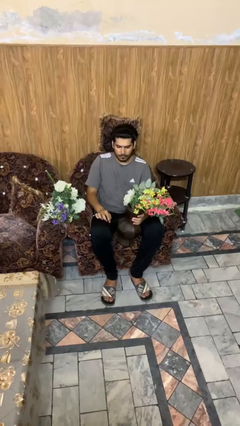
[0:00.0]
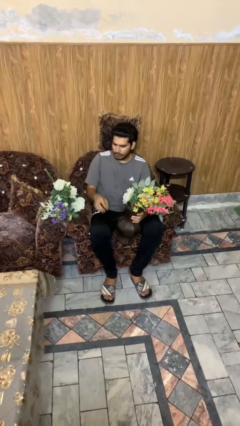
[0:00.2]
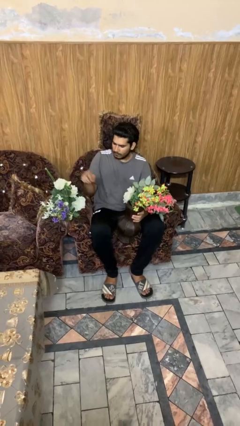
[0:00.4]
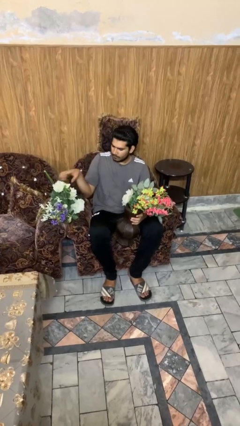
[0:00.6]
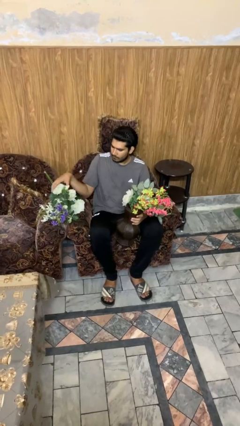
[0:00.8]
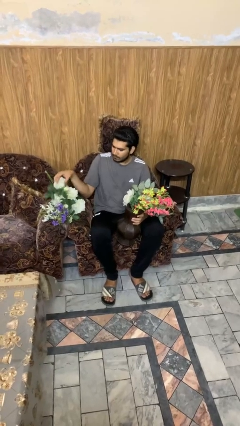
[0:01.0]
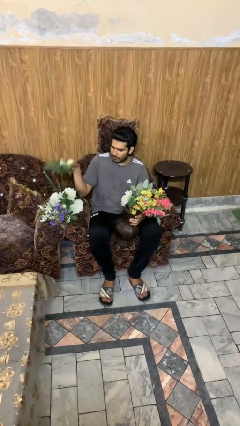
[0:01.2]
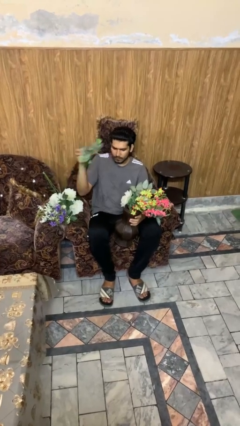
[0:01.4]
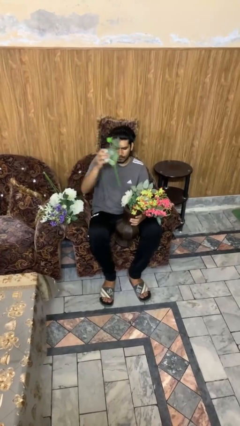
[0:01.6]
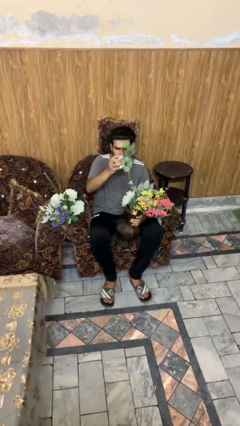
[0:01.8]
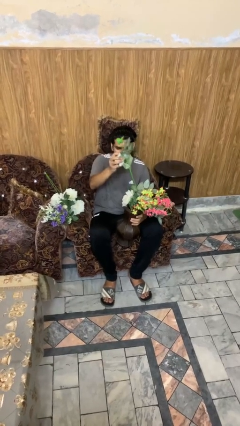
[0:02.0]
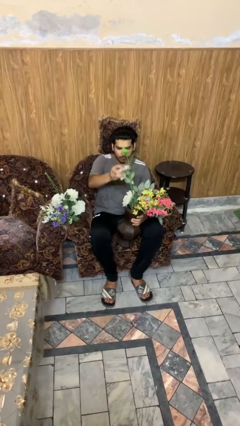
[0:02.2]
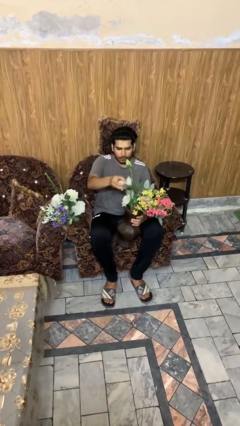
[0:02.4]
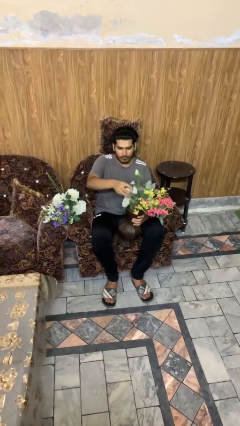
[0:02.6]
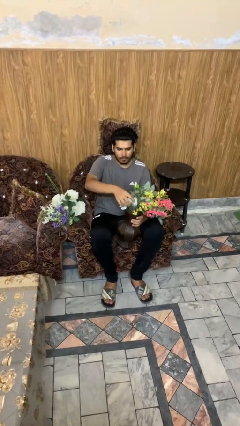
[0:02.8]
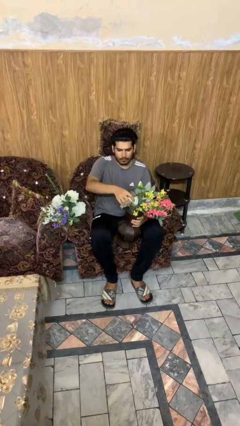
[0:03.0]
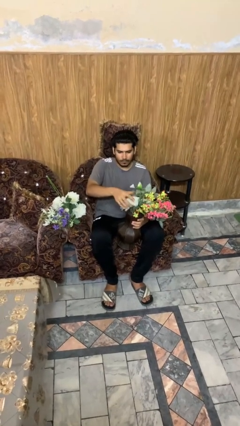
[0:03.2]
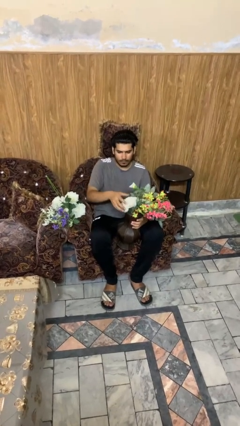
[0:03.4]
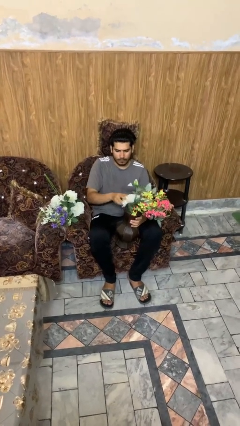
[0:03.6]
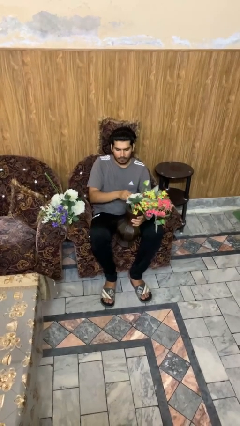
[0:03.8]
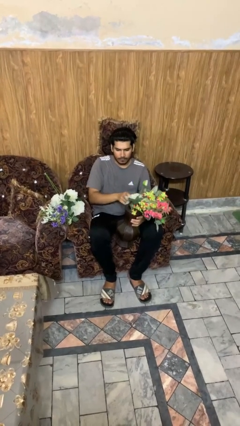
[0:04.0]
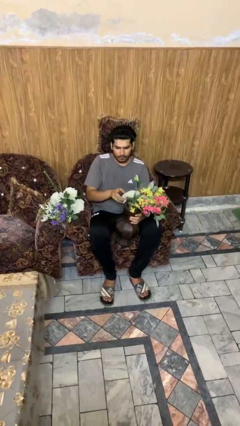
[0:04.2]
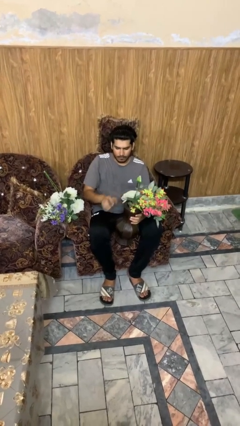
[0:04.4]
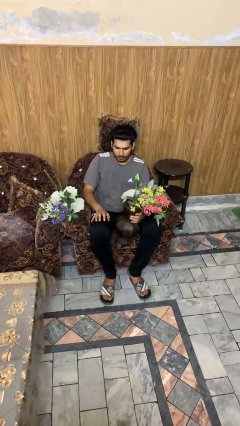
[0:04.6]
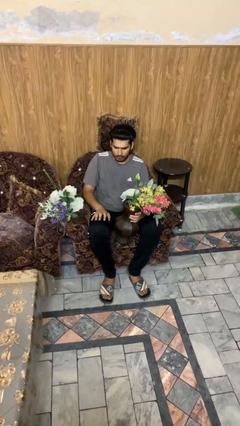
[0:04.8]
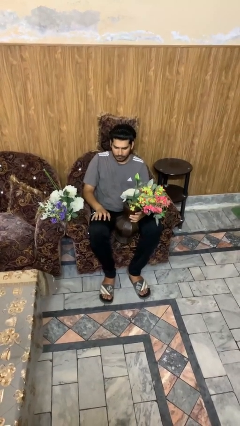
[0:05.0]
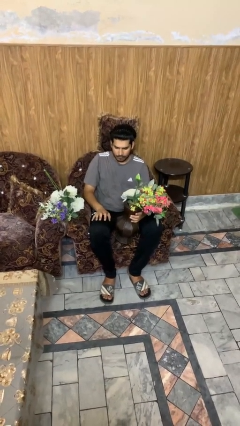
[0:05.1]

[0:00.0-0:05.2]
person arranges flowers in vase

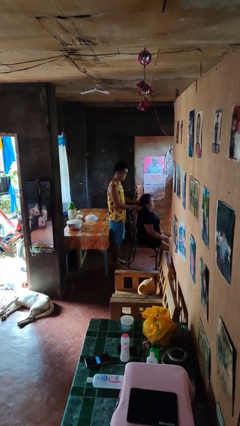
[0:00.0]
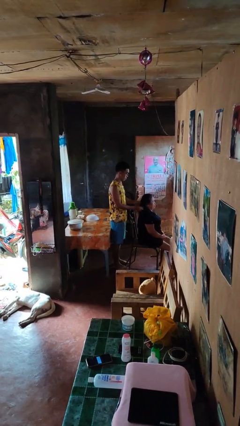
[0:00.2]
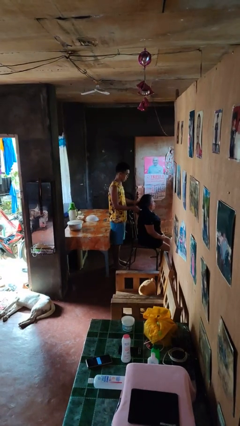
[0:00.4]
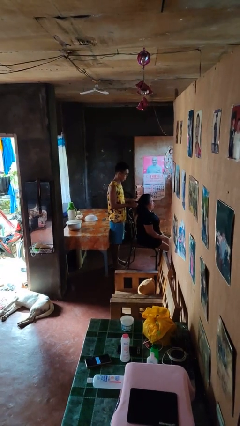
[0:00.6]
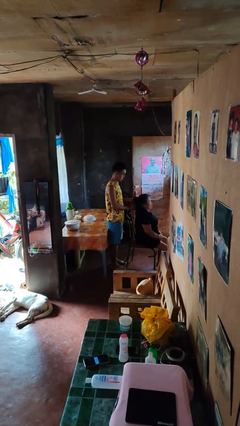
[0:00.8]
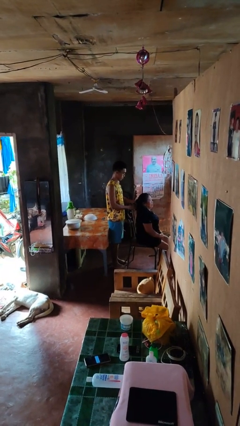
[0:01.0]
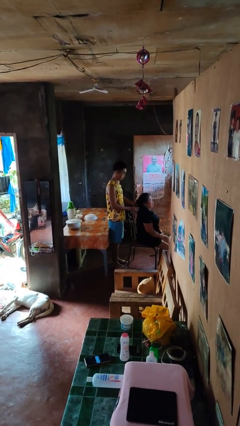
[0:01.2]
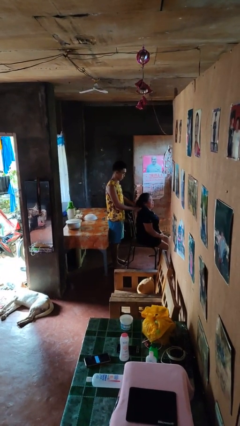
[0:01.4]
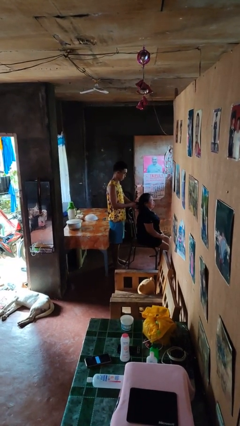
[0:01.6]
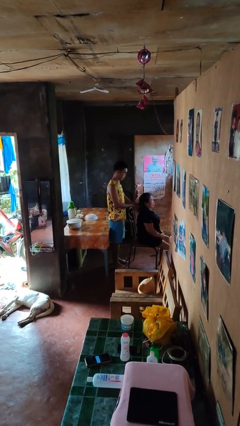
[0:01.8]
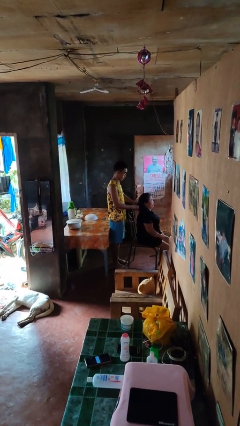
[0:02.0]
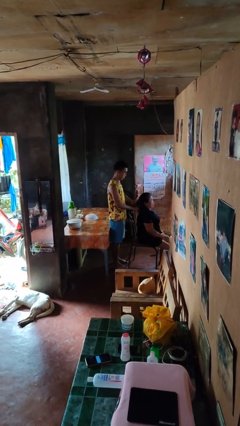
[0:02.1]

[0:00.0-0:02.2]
person braids hair of person

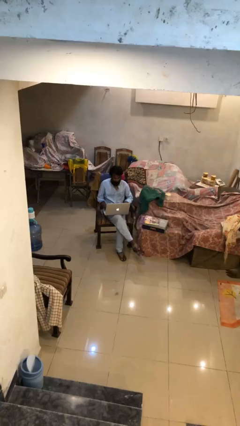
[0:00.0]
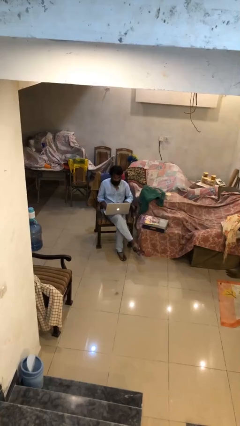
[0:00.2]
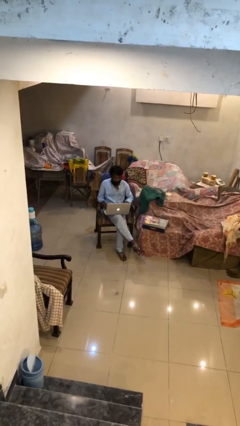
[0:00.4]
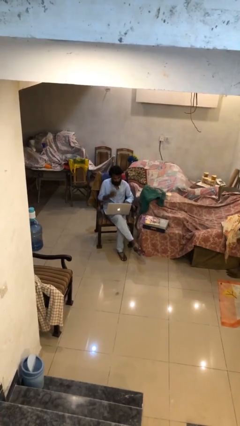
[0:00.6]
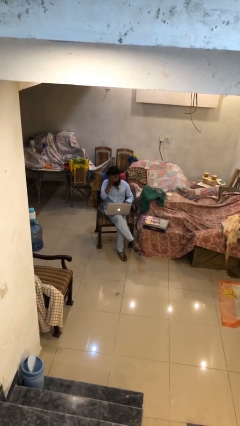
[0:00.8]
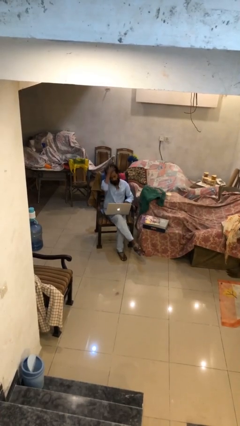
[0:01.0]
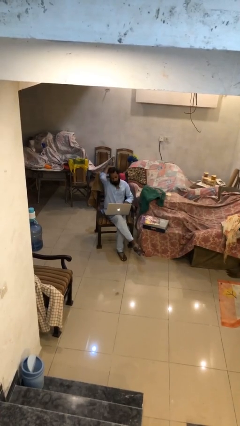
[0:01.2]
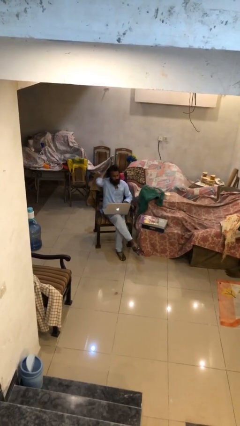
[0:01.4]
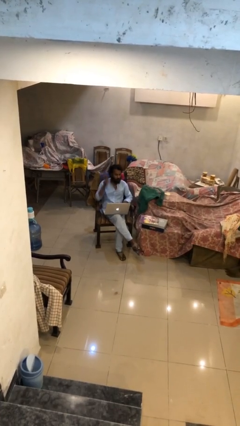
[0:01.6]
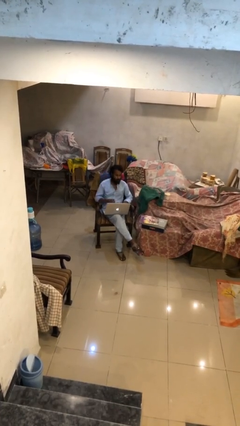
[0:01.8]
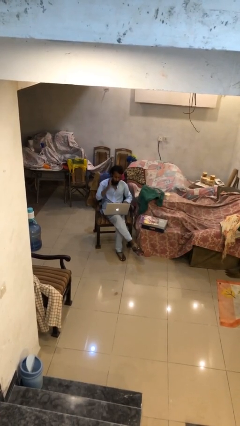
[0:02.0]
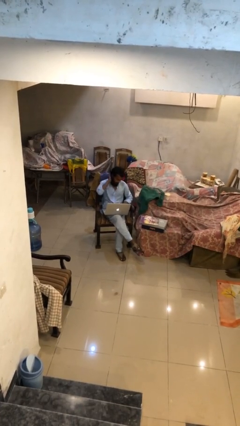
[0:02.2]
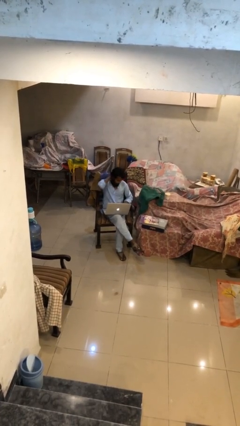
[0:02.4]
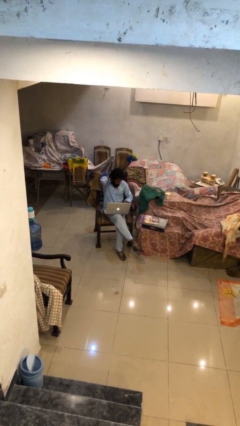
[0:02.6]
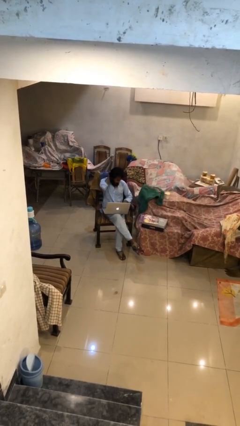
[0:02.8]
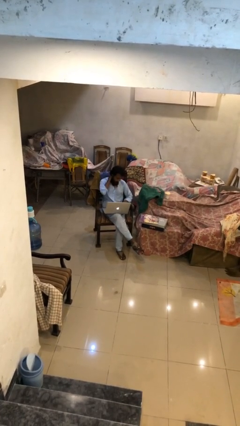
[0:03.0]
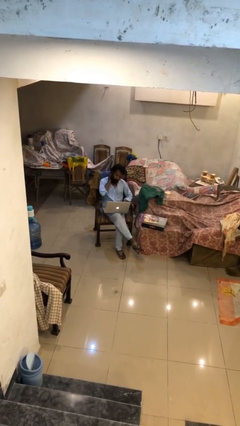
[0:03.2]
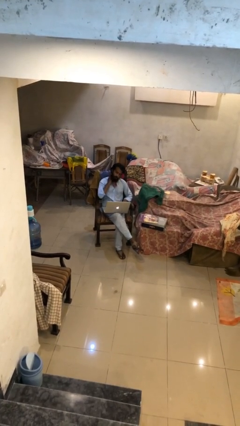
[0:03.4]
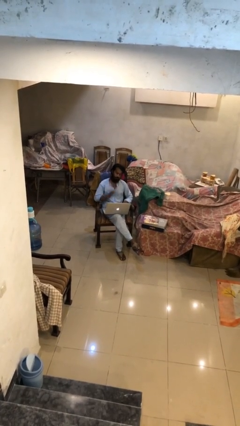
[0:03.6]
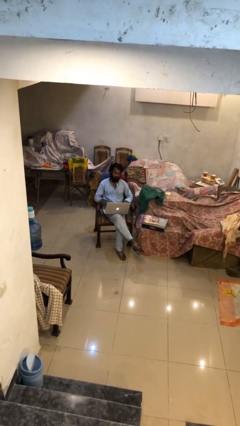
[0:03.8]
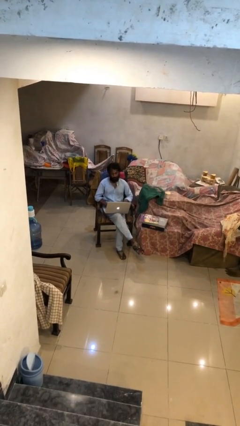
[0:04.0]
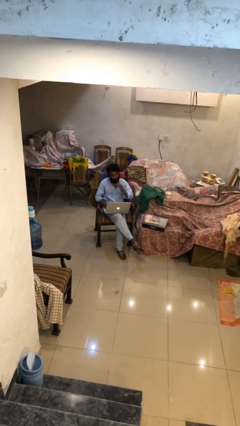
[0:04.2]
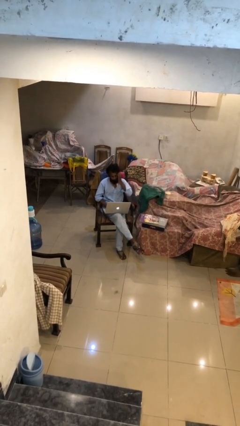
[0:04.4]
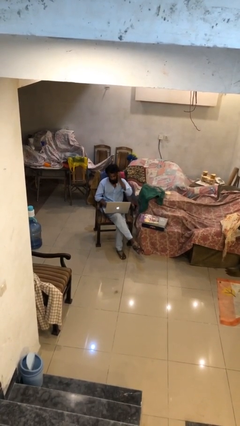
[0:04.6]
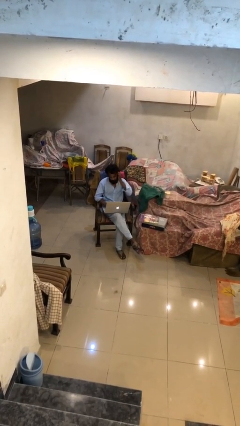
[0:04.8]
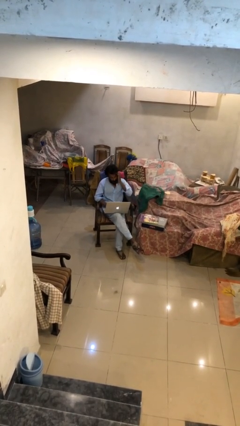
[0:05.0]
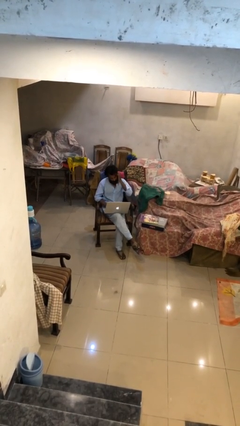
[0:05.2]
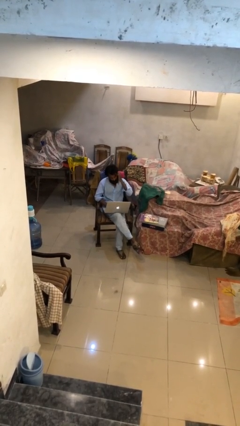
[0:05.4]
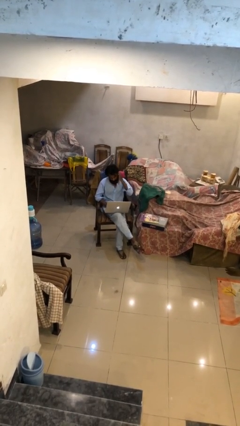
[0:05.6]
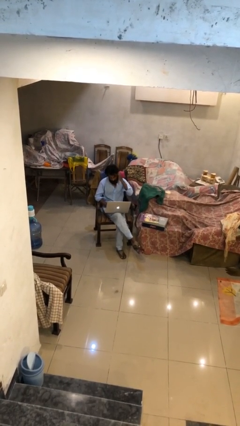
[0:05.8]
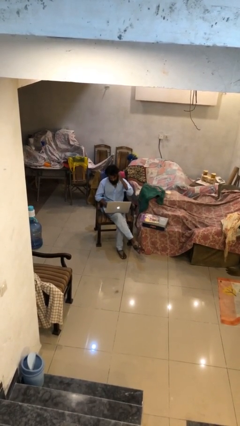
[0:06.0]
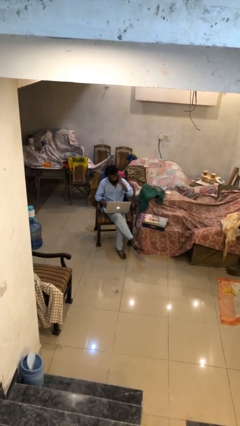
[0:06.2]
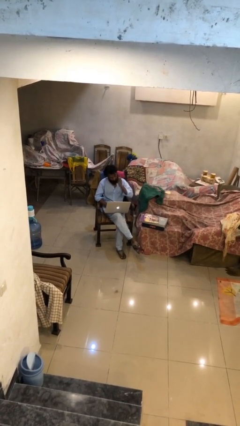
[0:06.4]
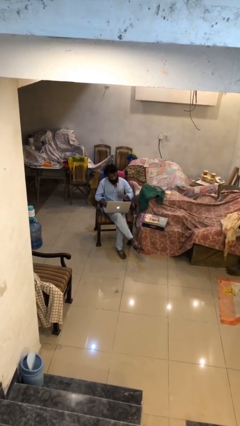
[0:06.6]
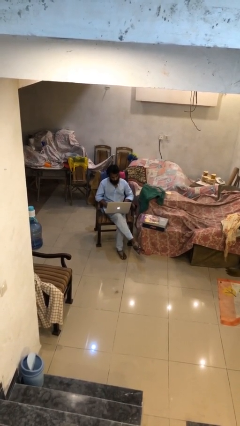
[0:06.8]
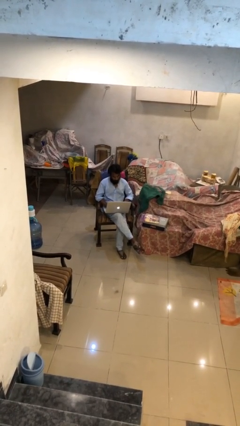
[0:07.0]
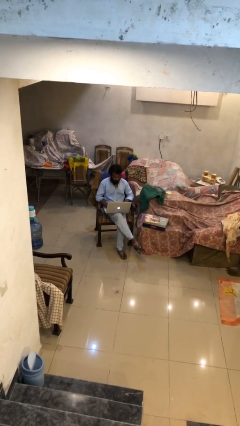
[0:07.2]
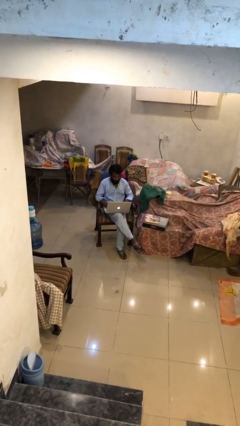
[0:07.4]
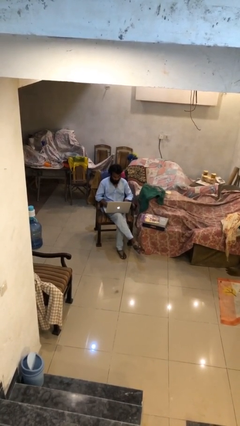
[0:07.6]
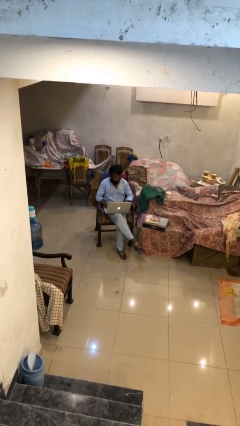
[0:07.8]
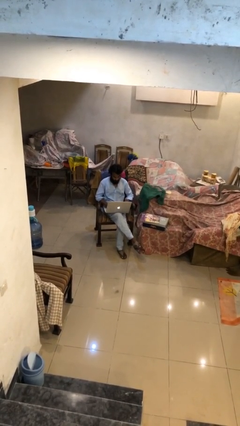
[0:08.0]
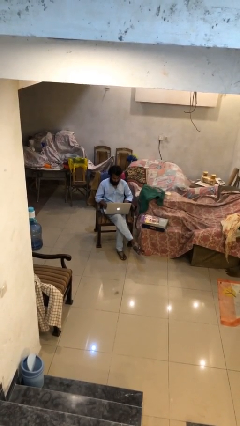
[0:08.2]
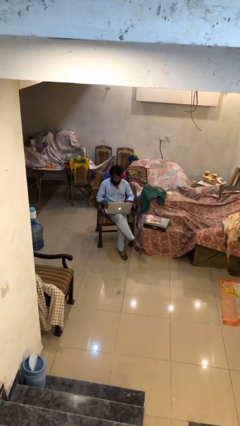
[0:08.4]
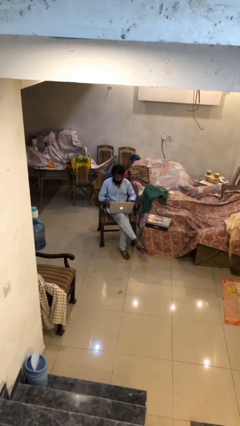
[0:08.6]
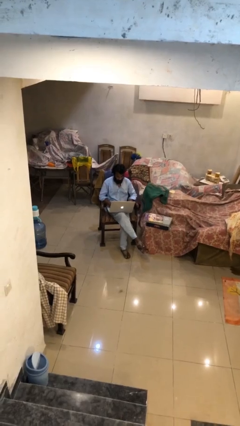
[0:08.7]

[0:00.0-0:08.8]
person interacts with laptop

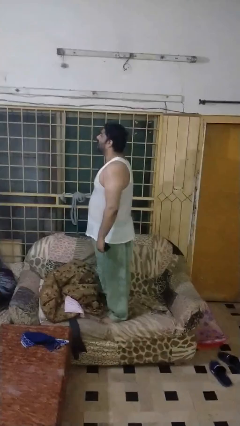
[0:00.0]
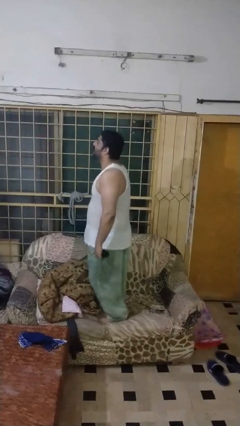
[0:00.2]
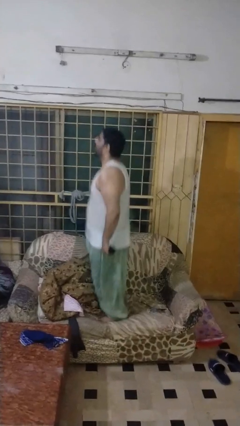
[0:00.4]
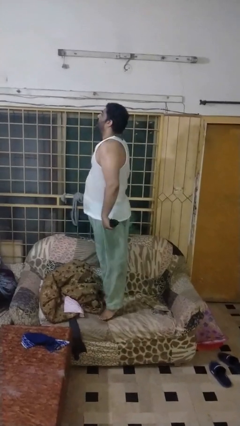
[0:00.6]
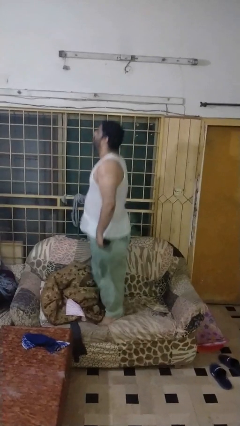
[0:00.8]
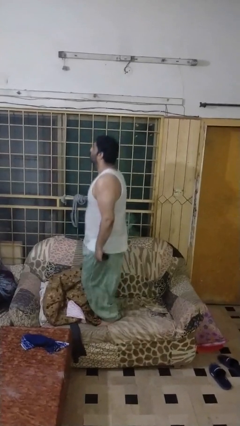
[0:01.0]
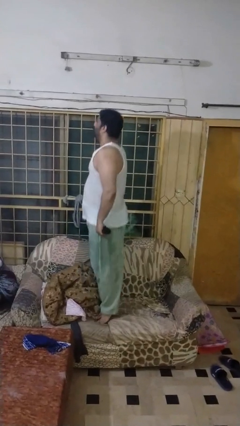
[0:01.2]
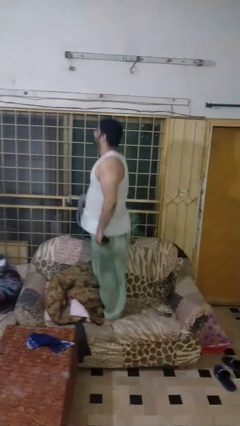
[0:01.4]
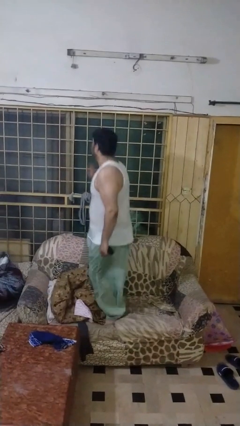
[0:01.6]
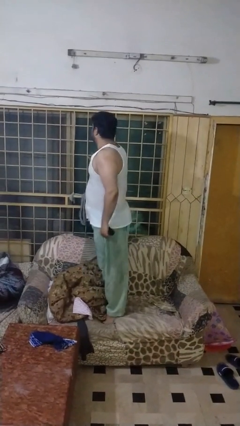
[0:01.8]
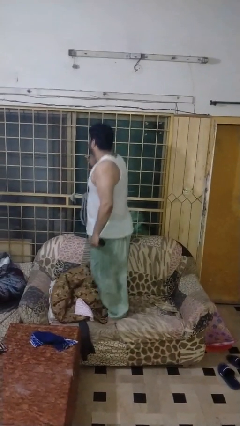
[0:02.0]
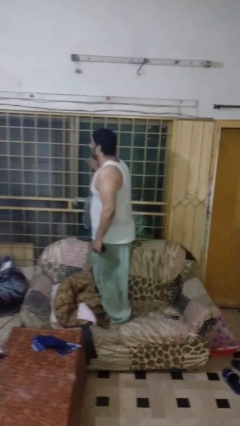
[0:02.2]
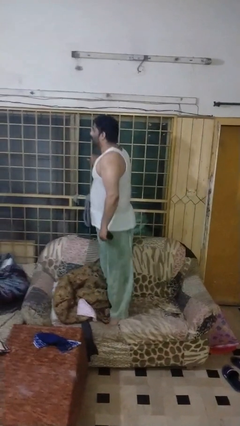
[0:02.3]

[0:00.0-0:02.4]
person jumps on couch
